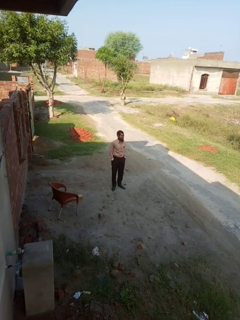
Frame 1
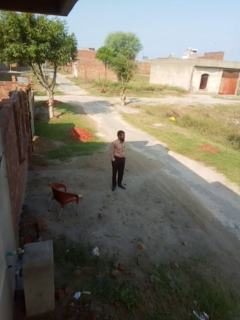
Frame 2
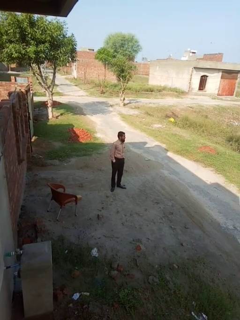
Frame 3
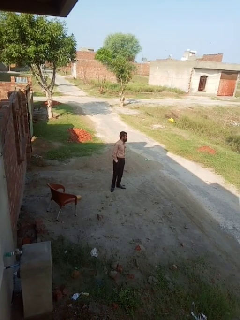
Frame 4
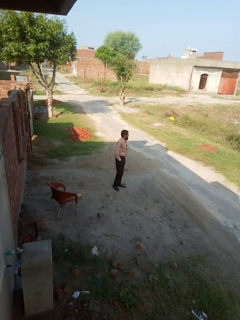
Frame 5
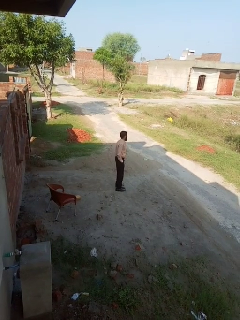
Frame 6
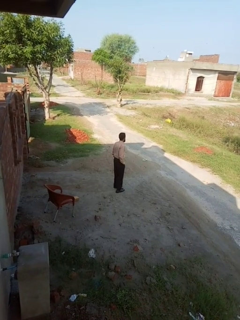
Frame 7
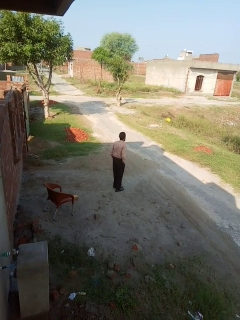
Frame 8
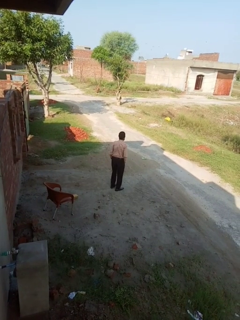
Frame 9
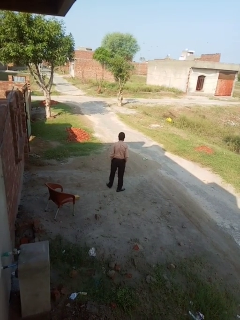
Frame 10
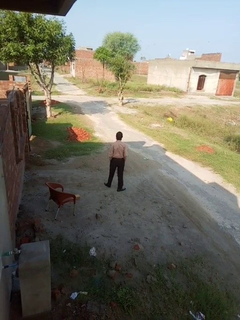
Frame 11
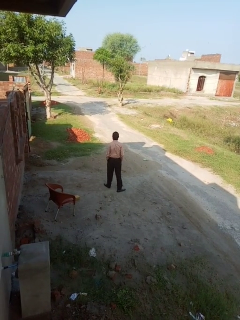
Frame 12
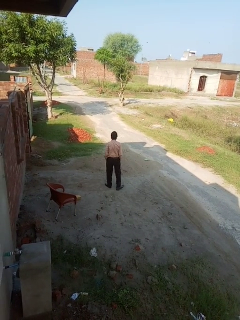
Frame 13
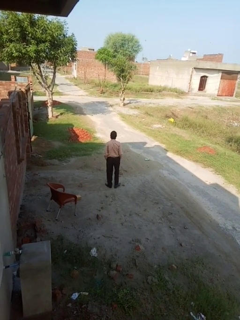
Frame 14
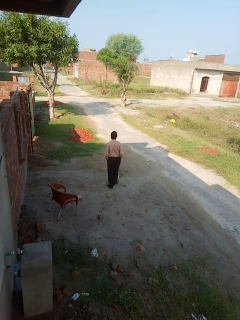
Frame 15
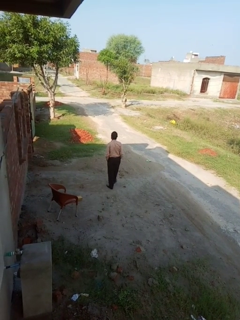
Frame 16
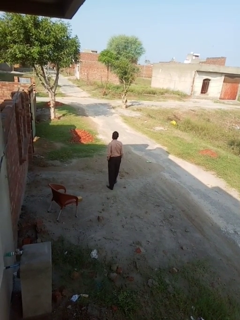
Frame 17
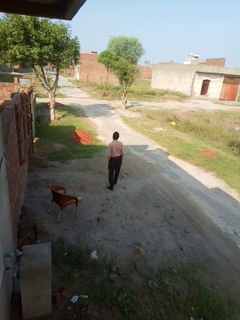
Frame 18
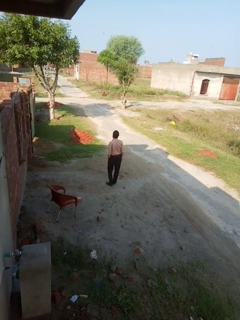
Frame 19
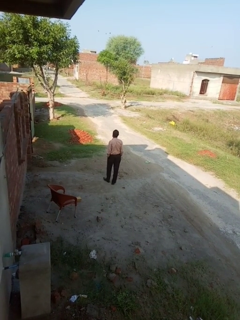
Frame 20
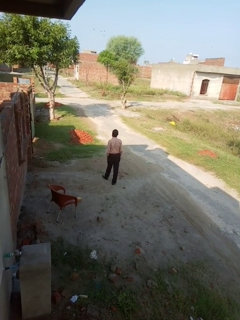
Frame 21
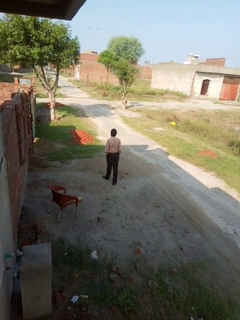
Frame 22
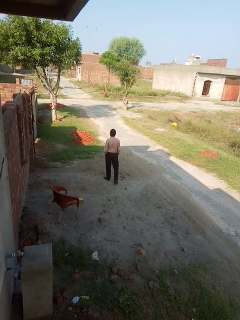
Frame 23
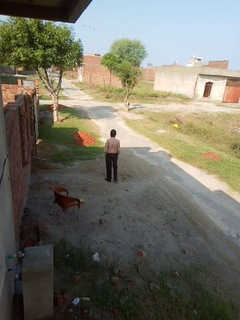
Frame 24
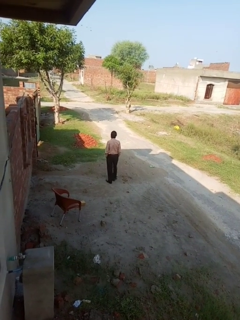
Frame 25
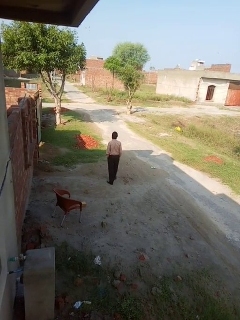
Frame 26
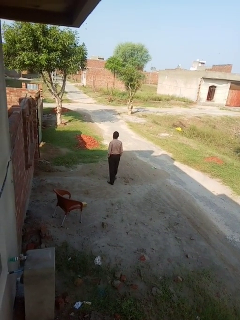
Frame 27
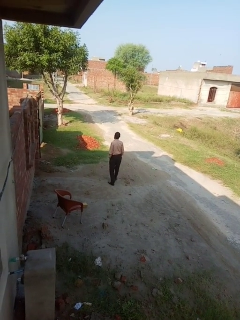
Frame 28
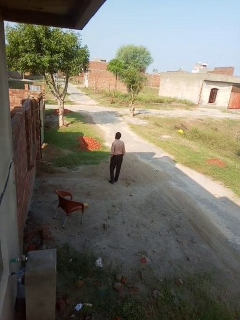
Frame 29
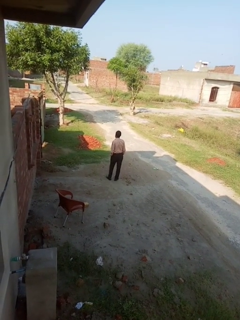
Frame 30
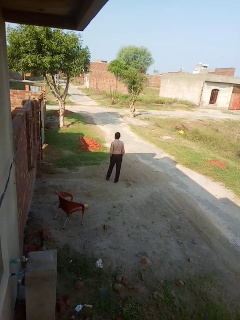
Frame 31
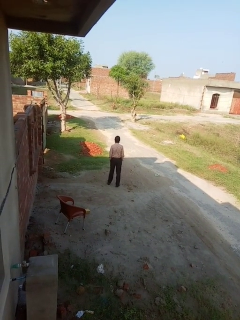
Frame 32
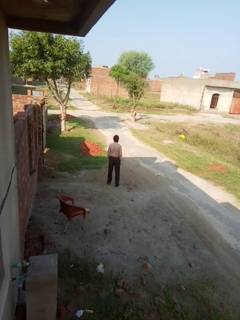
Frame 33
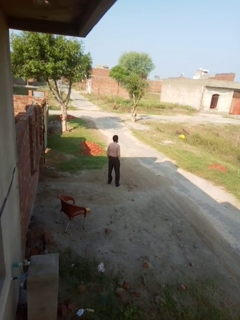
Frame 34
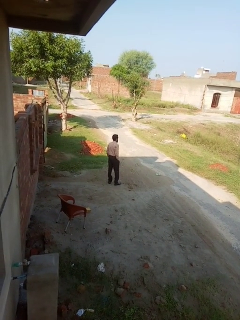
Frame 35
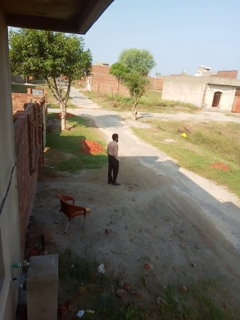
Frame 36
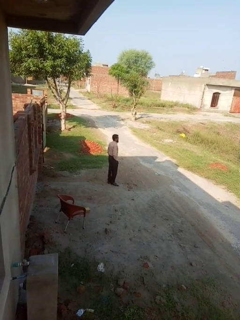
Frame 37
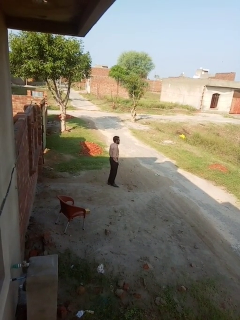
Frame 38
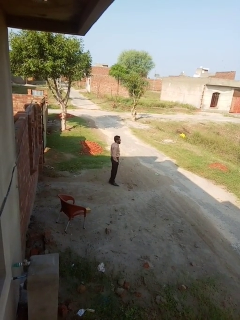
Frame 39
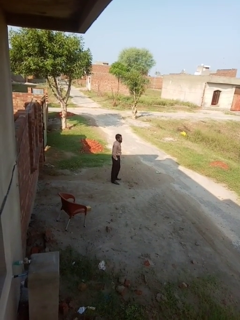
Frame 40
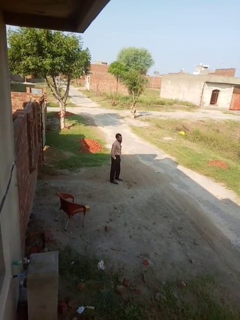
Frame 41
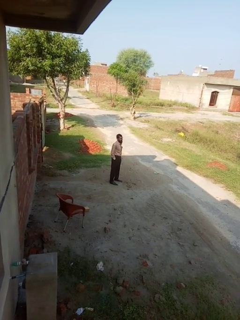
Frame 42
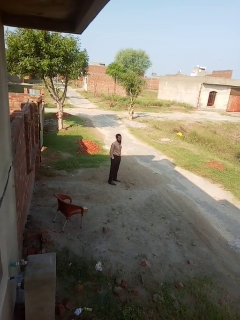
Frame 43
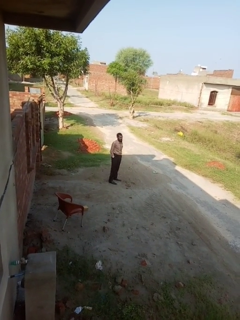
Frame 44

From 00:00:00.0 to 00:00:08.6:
person walks tiptoe

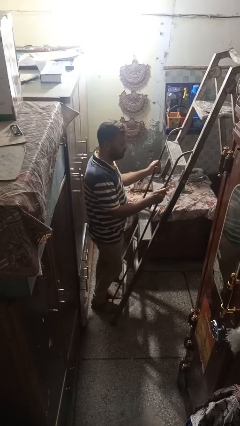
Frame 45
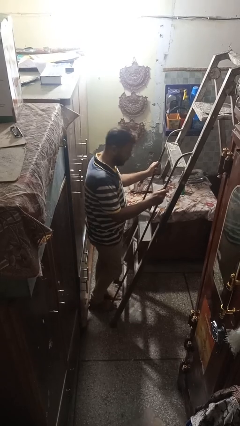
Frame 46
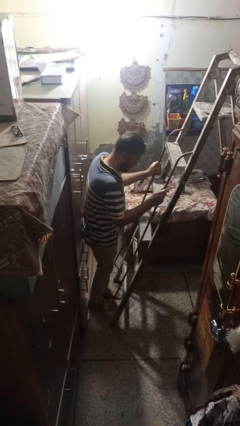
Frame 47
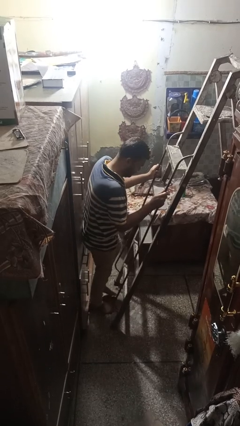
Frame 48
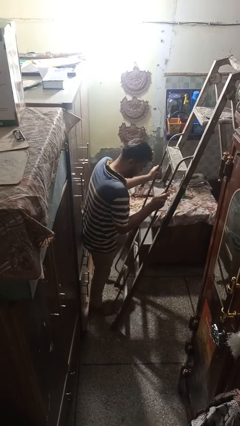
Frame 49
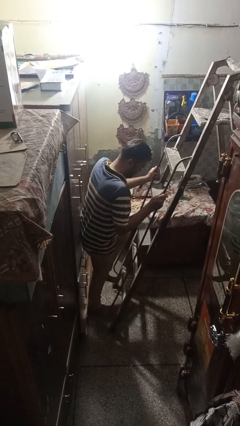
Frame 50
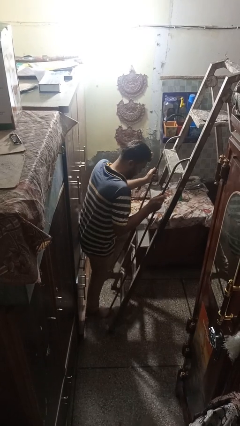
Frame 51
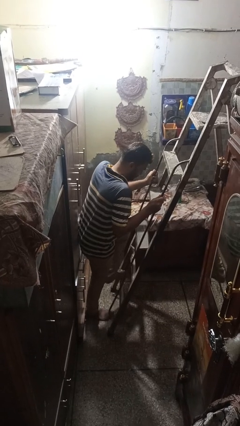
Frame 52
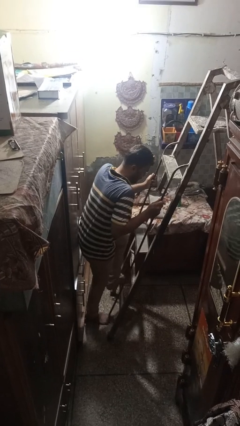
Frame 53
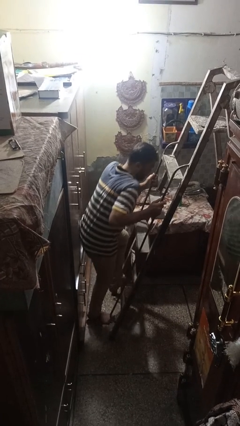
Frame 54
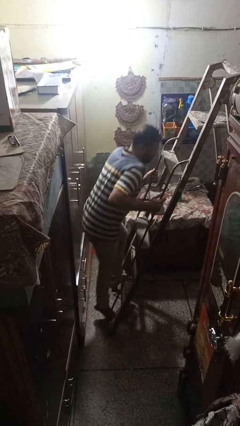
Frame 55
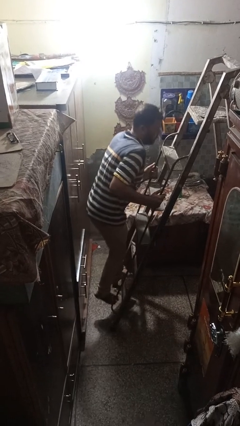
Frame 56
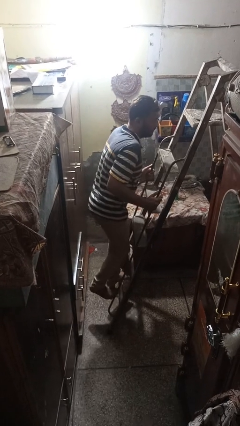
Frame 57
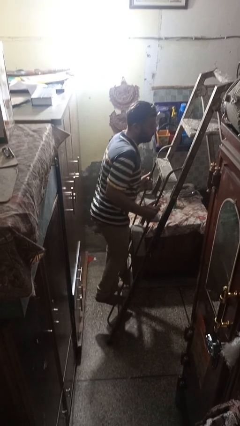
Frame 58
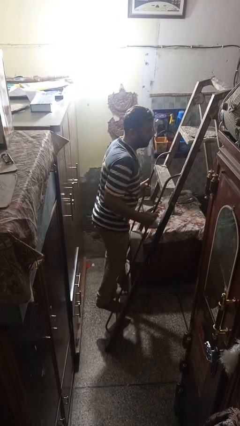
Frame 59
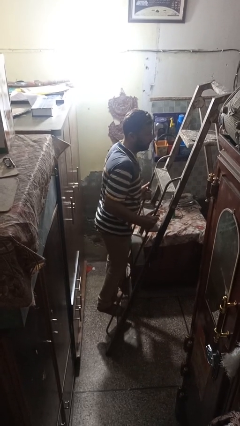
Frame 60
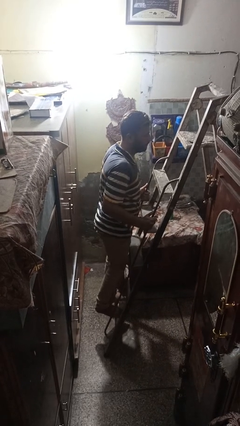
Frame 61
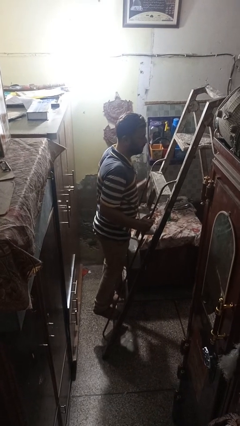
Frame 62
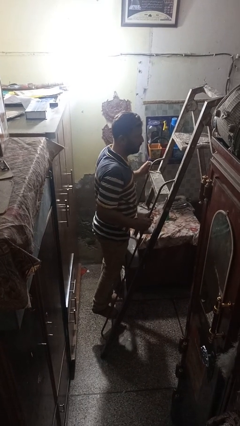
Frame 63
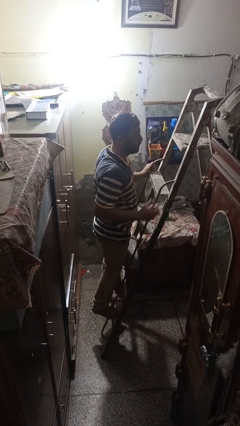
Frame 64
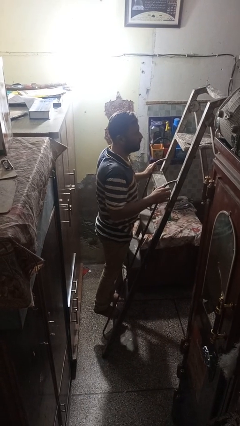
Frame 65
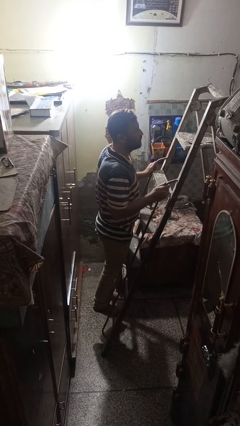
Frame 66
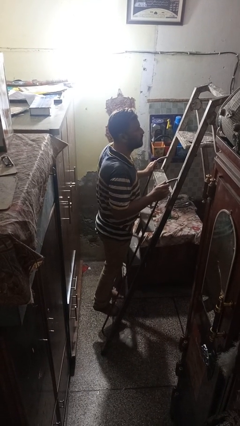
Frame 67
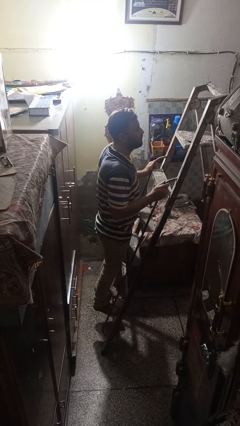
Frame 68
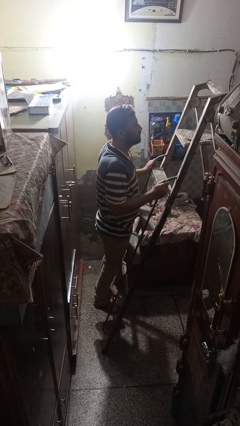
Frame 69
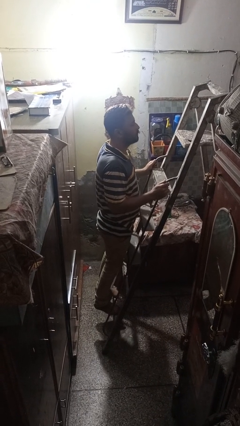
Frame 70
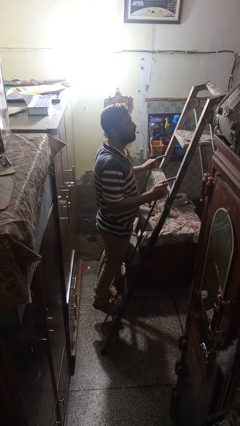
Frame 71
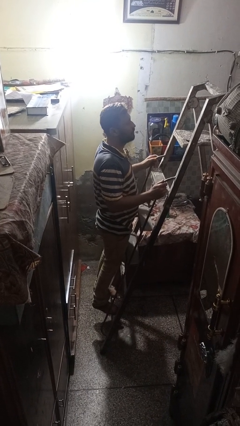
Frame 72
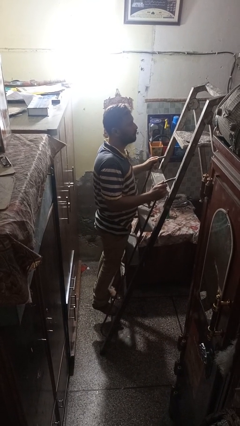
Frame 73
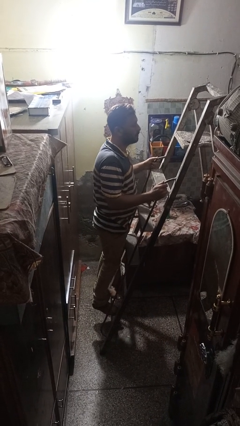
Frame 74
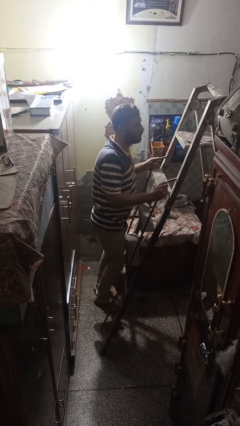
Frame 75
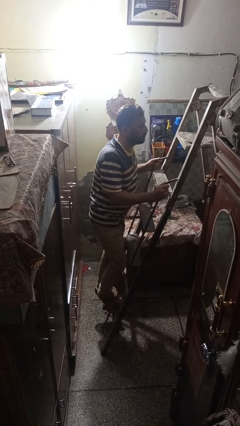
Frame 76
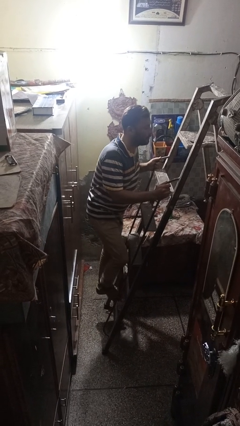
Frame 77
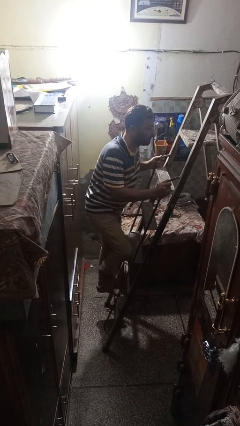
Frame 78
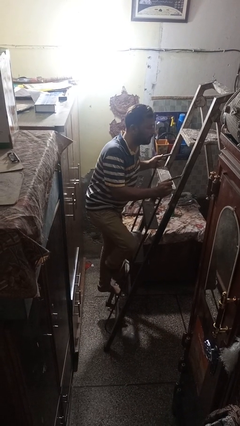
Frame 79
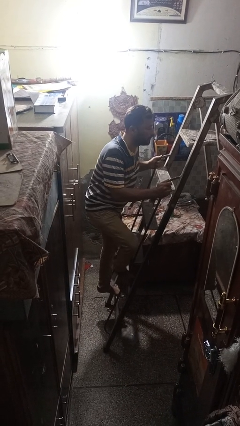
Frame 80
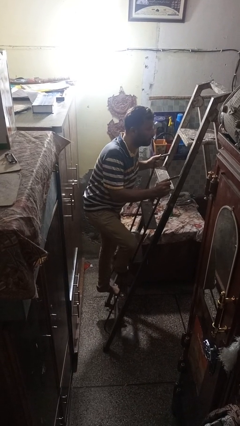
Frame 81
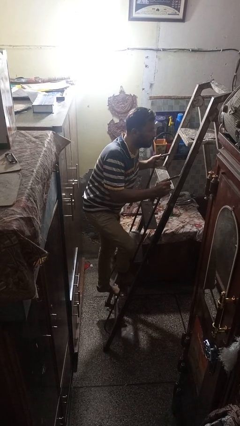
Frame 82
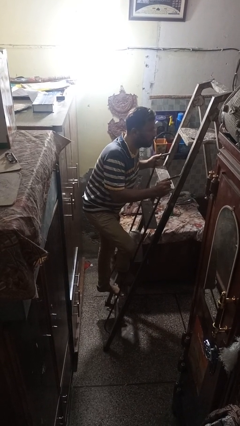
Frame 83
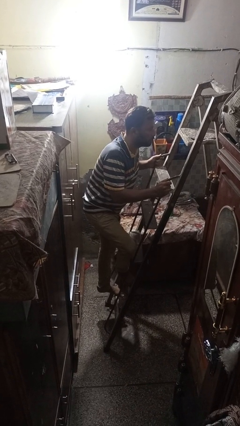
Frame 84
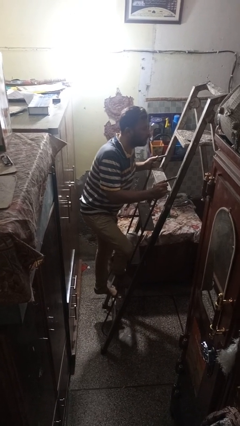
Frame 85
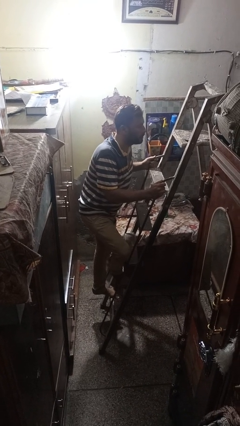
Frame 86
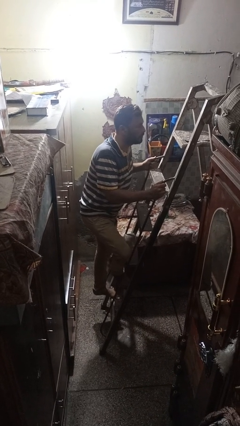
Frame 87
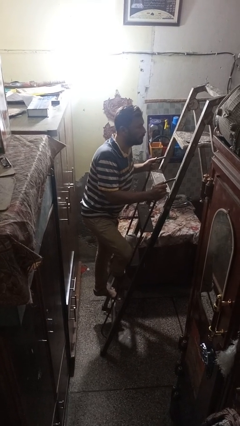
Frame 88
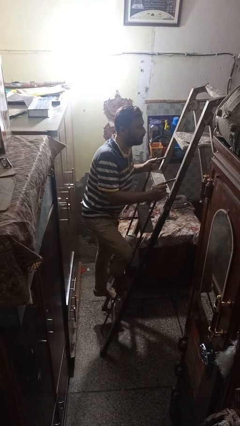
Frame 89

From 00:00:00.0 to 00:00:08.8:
person climbs up ladder

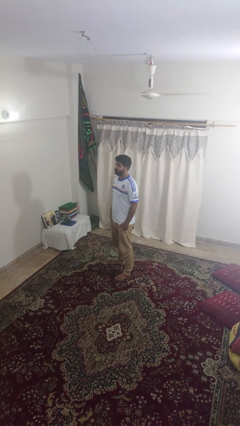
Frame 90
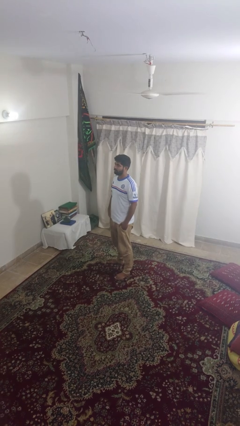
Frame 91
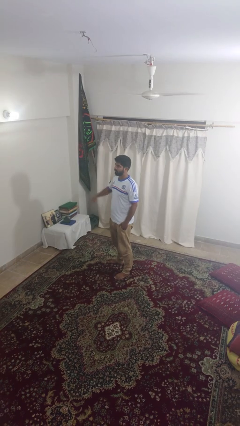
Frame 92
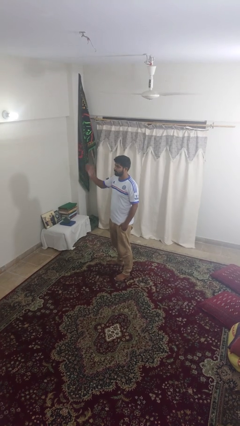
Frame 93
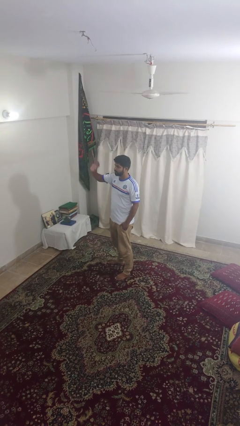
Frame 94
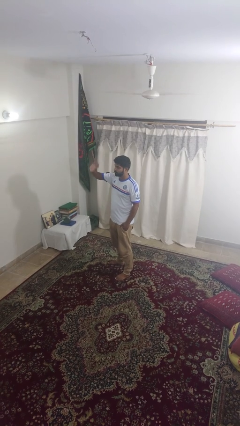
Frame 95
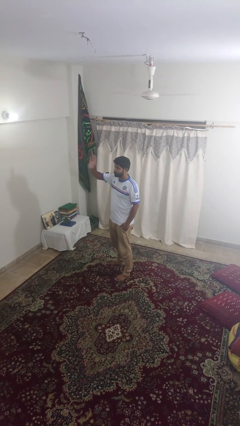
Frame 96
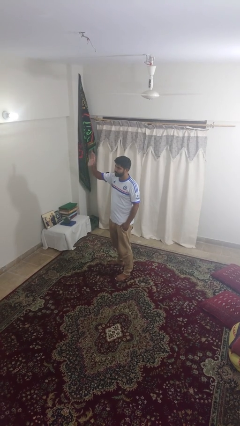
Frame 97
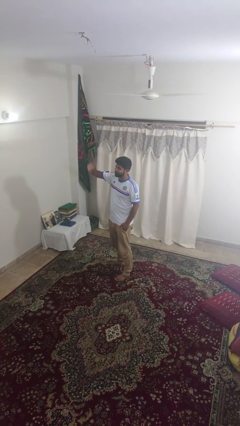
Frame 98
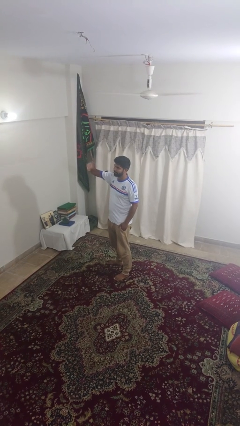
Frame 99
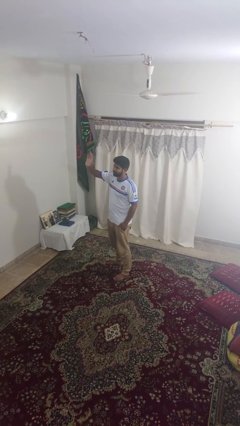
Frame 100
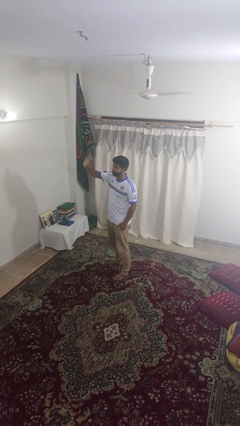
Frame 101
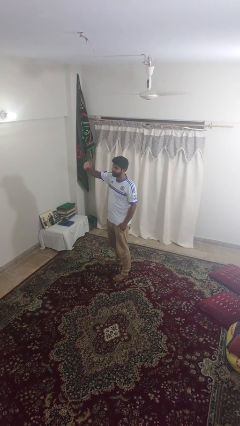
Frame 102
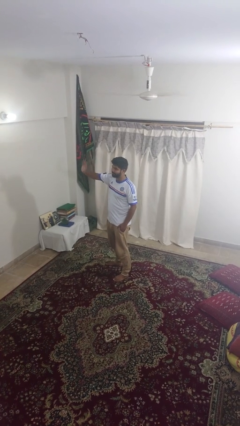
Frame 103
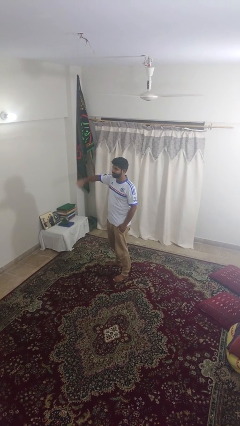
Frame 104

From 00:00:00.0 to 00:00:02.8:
person waves at person
